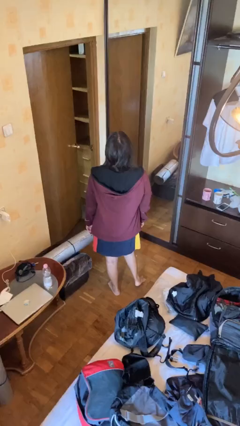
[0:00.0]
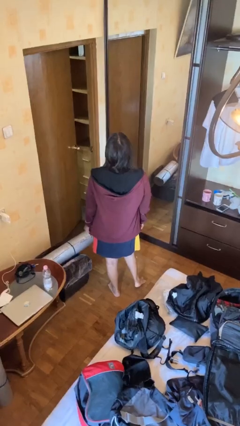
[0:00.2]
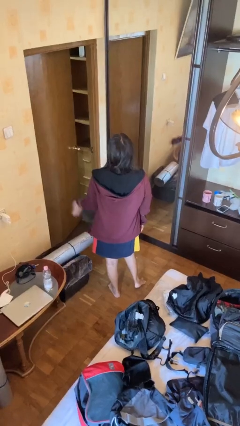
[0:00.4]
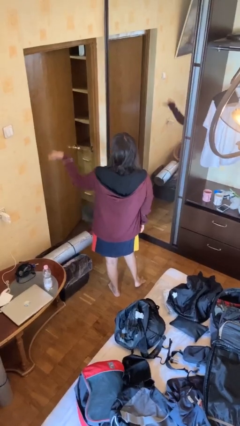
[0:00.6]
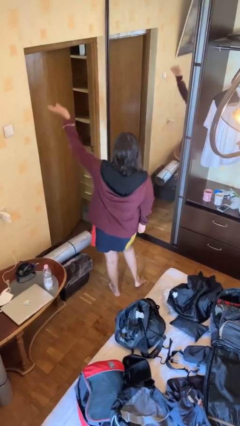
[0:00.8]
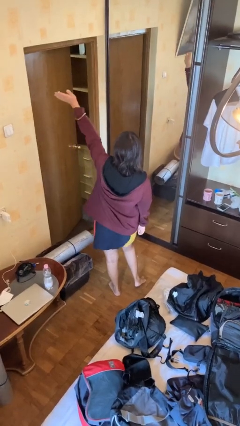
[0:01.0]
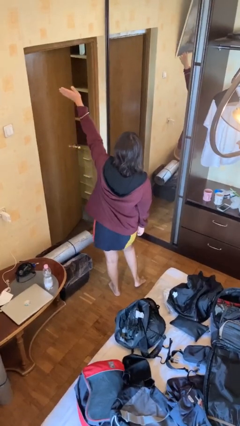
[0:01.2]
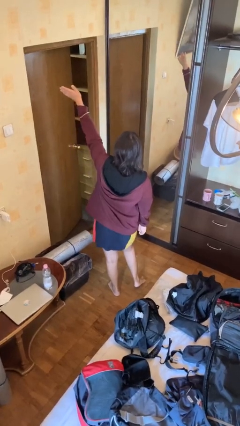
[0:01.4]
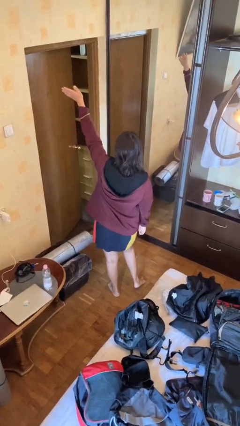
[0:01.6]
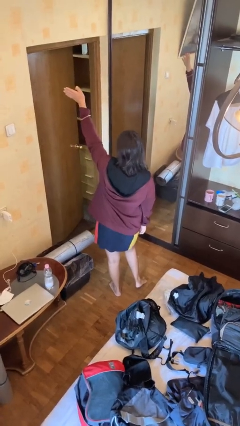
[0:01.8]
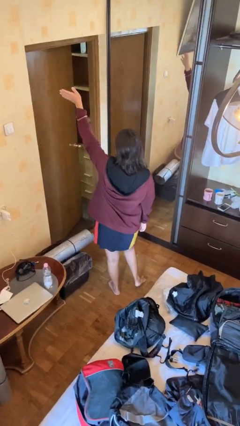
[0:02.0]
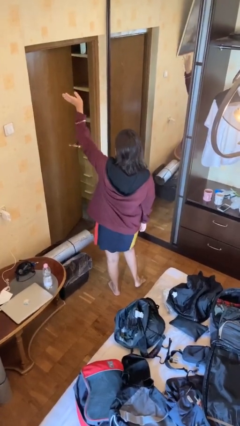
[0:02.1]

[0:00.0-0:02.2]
person gestures swipe up

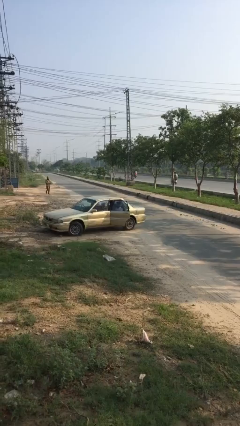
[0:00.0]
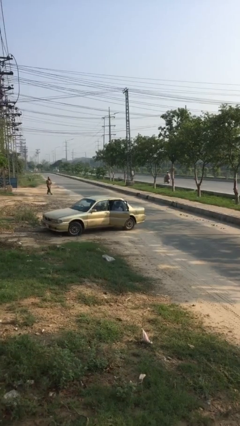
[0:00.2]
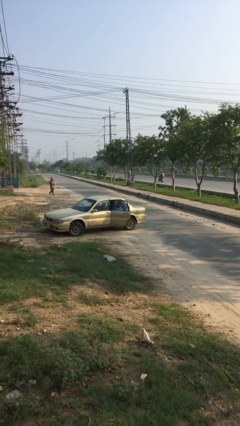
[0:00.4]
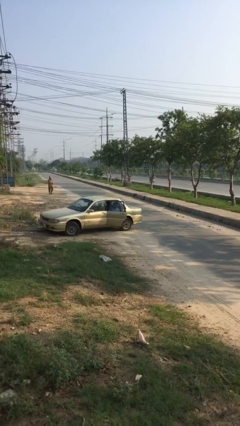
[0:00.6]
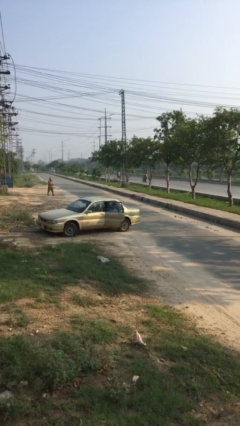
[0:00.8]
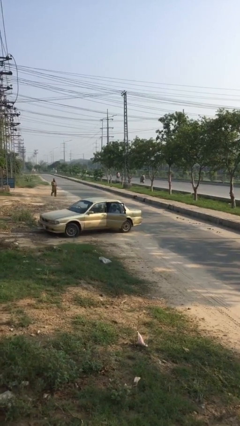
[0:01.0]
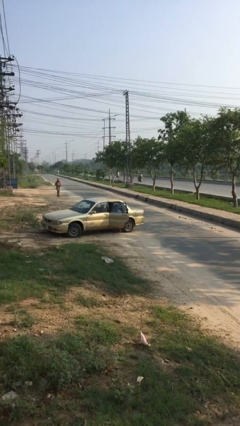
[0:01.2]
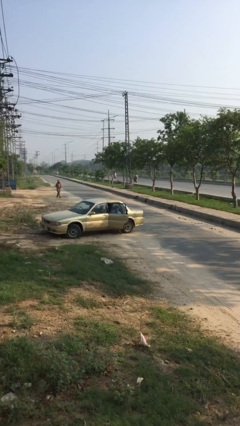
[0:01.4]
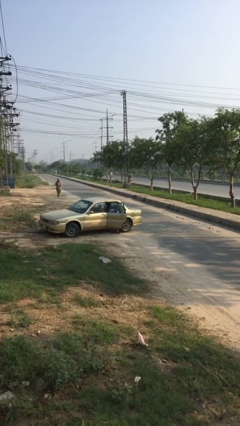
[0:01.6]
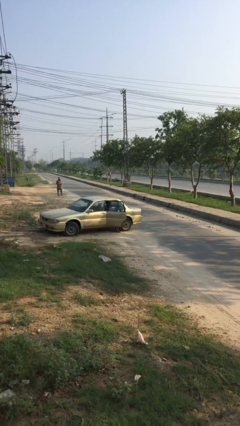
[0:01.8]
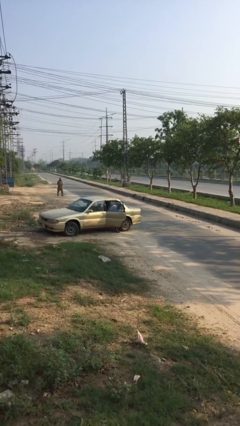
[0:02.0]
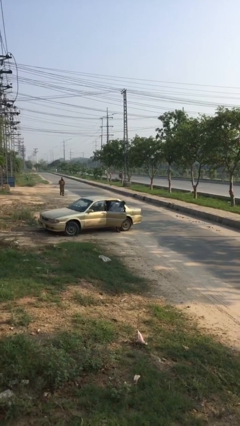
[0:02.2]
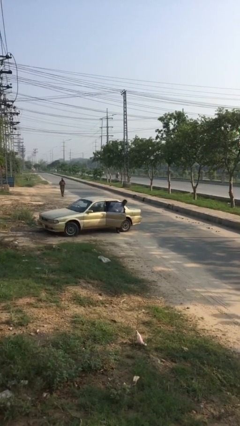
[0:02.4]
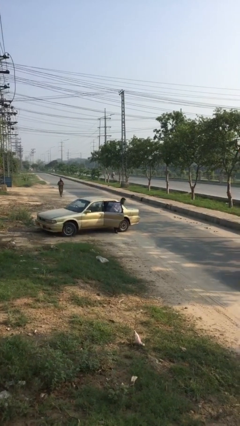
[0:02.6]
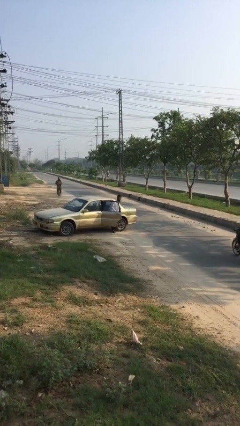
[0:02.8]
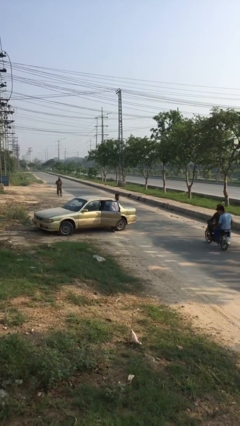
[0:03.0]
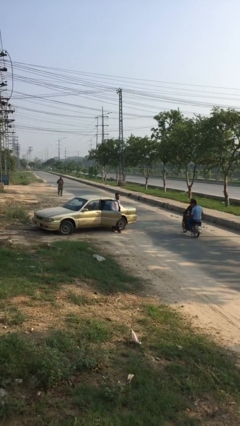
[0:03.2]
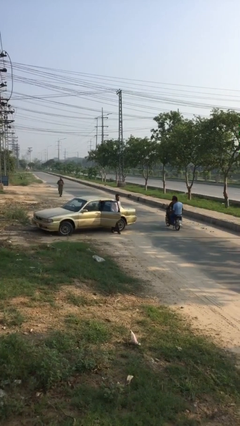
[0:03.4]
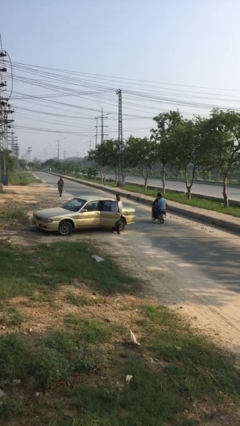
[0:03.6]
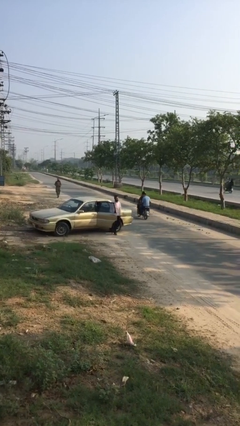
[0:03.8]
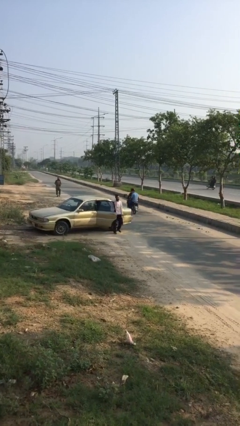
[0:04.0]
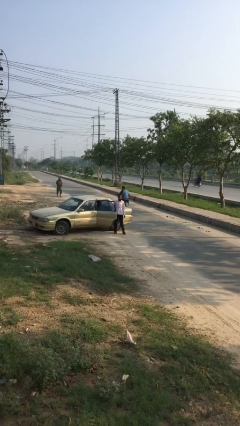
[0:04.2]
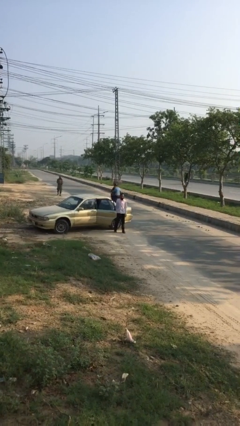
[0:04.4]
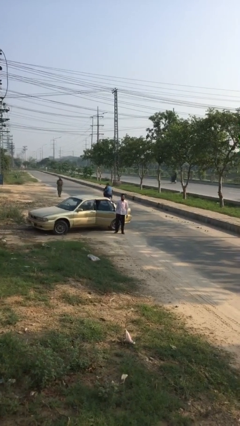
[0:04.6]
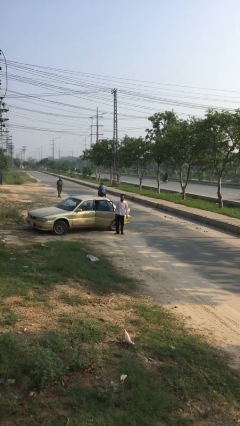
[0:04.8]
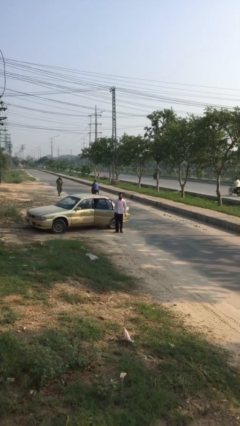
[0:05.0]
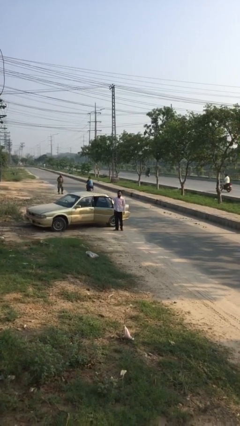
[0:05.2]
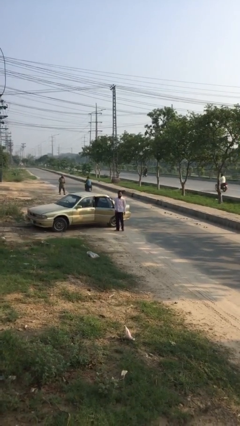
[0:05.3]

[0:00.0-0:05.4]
person exits car

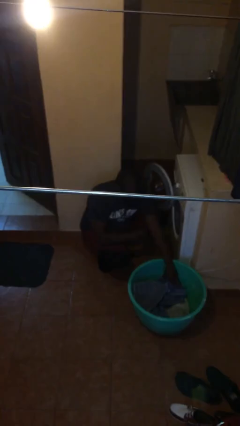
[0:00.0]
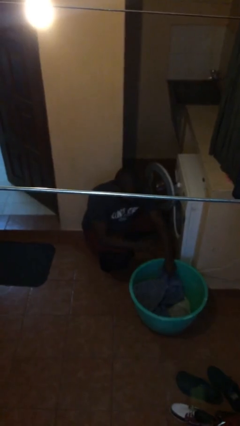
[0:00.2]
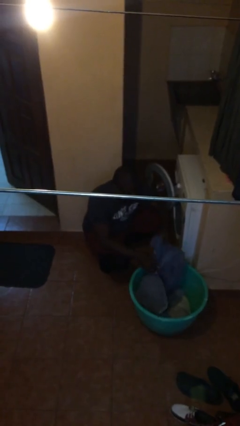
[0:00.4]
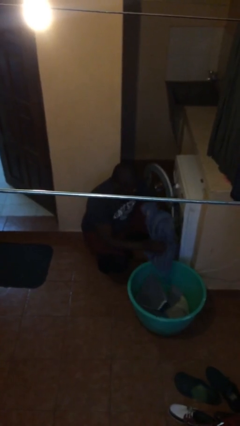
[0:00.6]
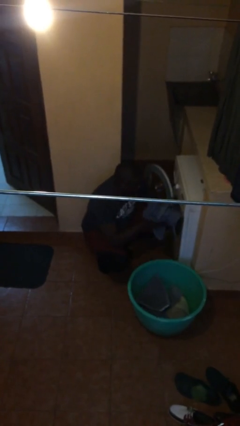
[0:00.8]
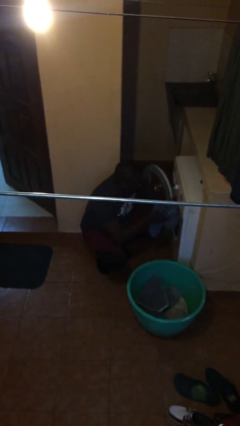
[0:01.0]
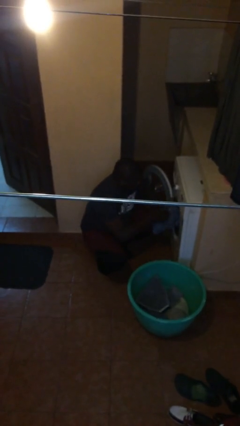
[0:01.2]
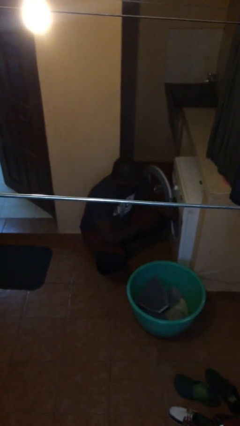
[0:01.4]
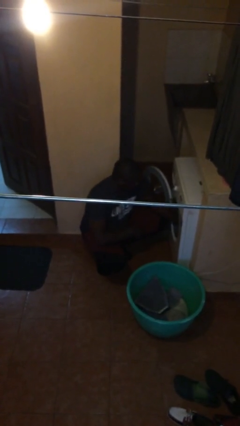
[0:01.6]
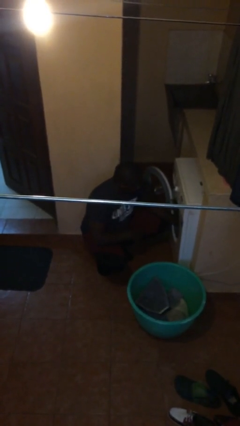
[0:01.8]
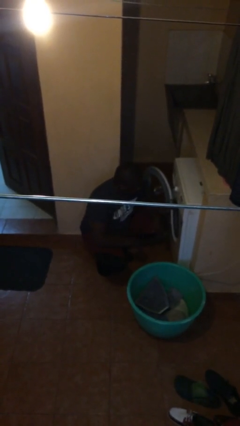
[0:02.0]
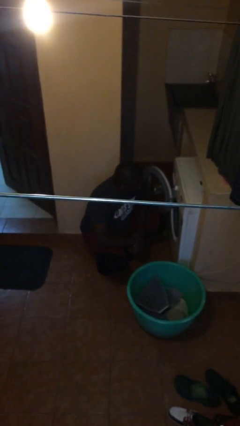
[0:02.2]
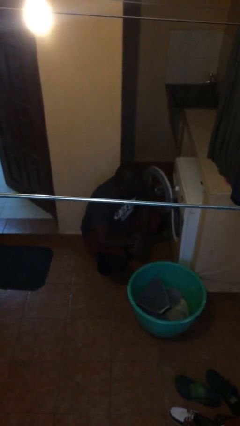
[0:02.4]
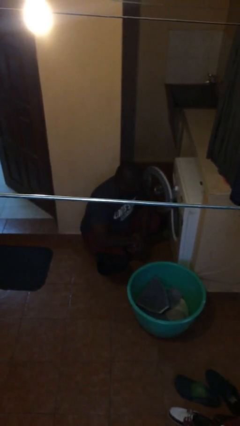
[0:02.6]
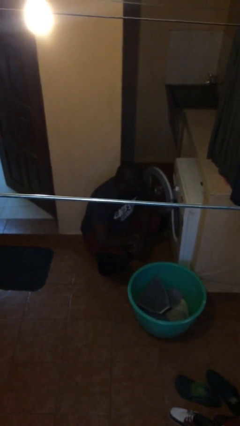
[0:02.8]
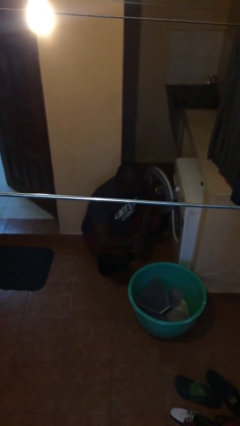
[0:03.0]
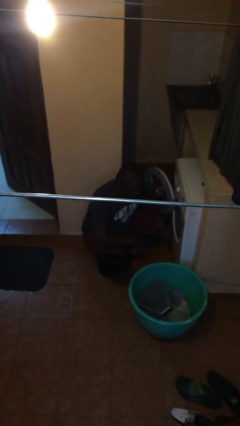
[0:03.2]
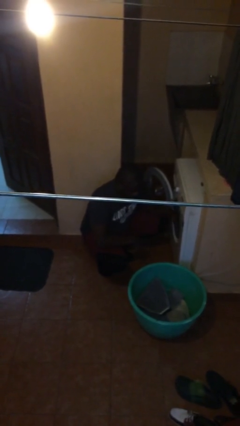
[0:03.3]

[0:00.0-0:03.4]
person loads dryer

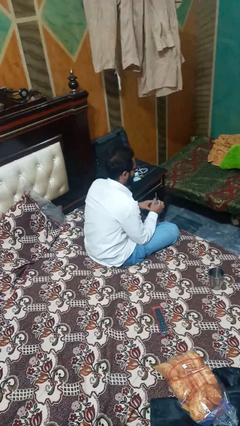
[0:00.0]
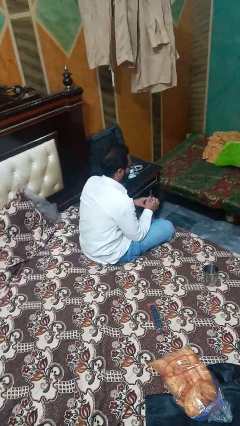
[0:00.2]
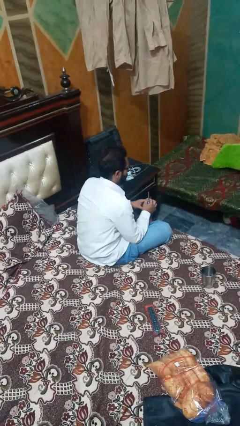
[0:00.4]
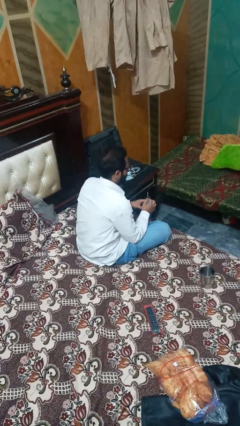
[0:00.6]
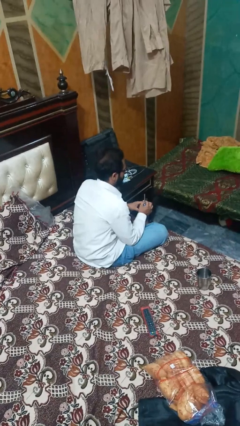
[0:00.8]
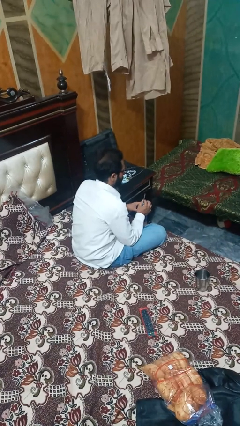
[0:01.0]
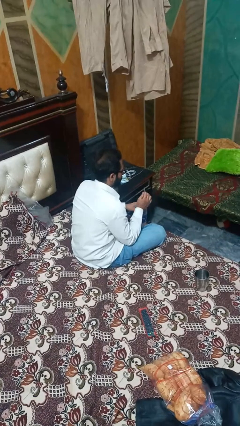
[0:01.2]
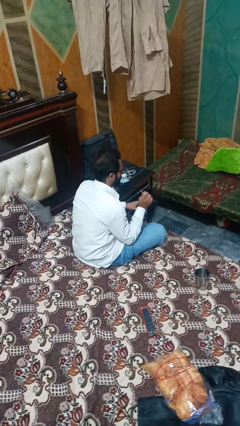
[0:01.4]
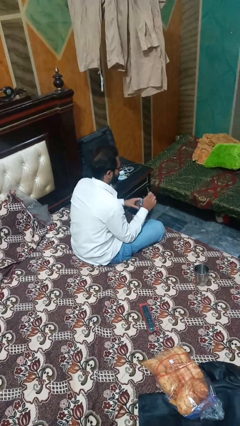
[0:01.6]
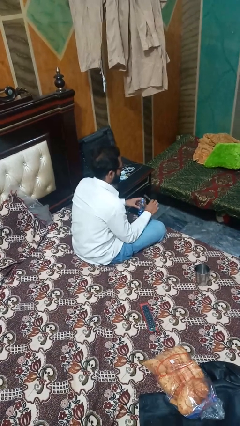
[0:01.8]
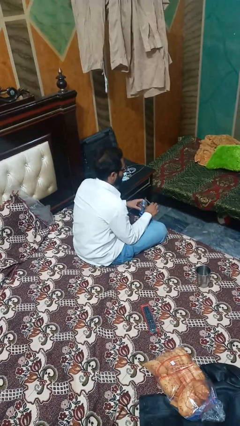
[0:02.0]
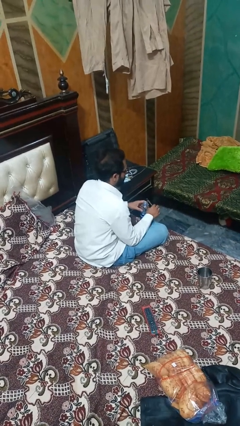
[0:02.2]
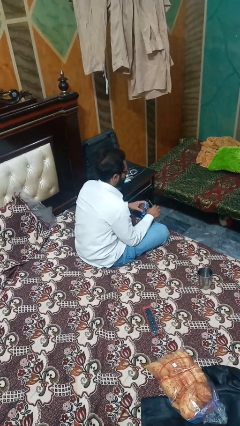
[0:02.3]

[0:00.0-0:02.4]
person pours liquid into cup

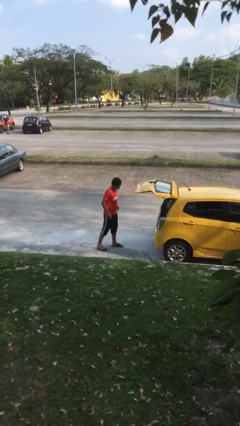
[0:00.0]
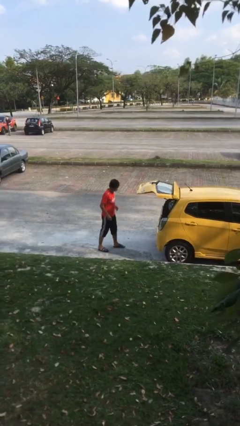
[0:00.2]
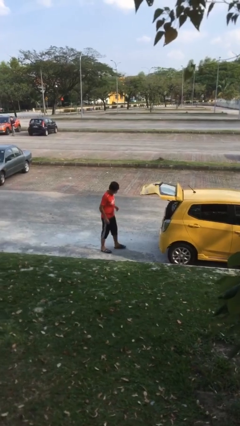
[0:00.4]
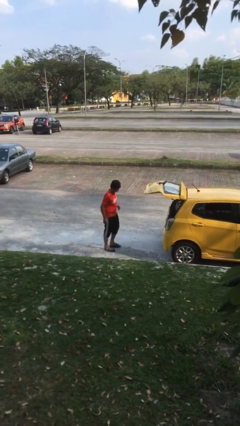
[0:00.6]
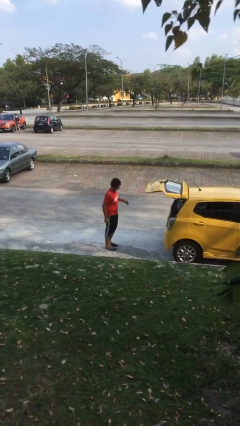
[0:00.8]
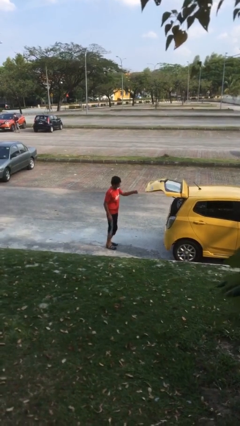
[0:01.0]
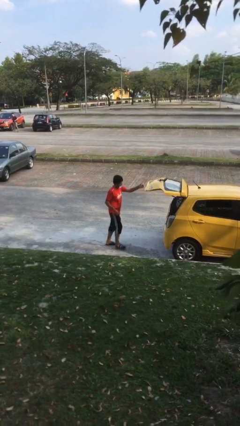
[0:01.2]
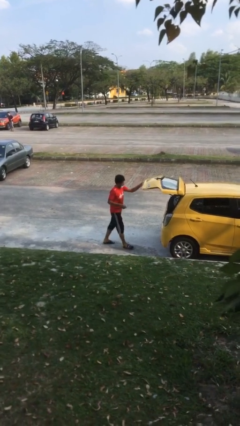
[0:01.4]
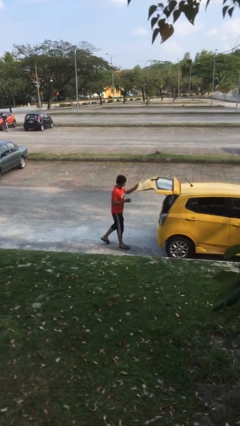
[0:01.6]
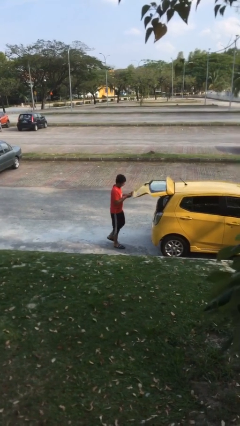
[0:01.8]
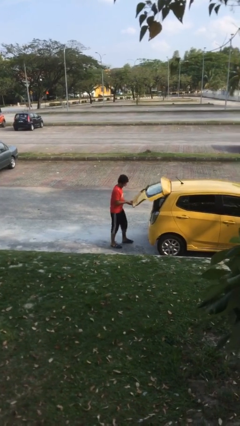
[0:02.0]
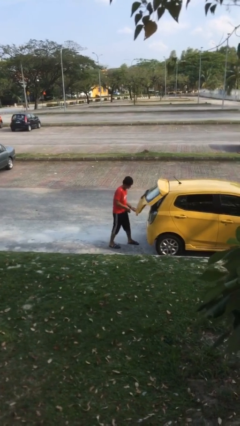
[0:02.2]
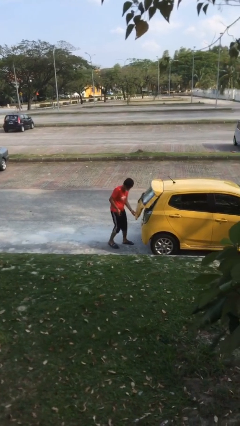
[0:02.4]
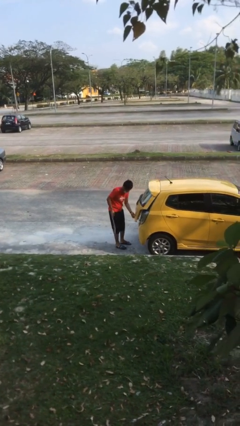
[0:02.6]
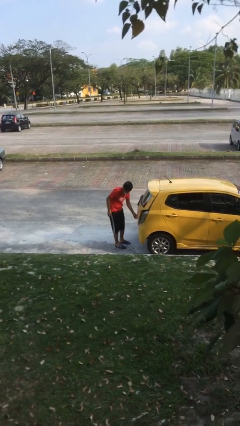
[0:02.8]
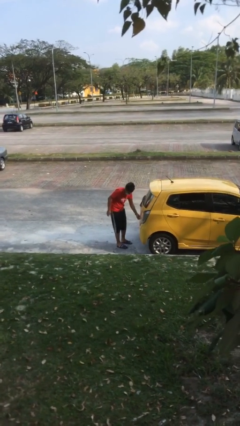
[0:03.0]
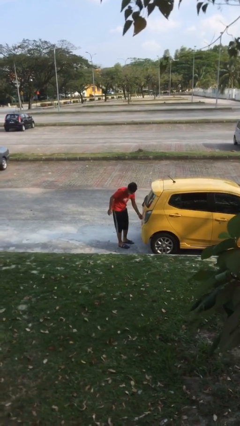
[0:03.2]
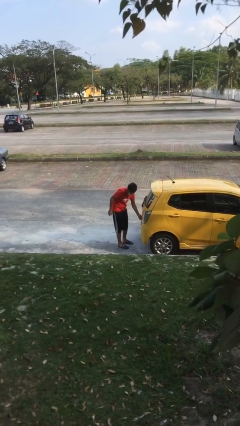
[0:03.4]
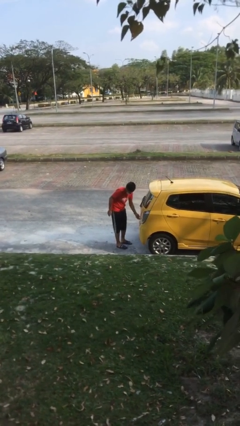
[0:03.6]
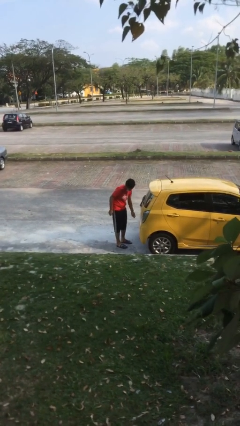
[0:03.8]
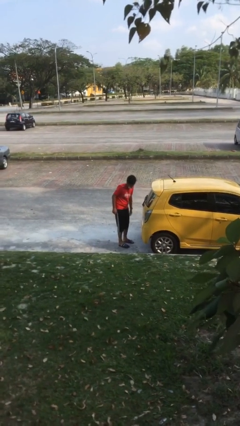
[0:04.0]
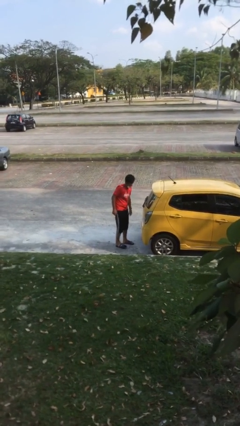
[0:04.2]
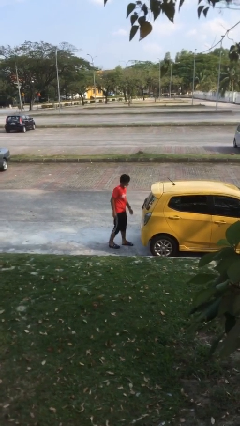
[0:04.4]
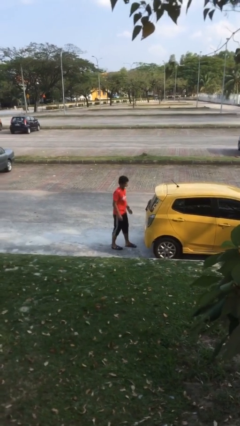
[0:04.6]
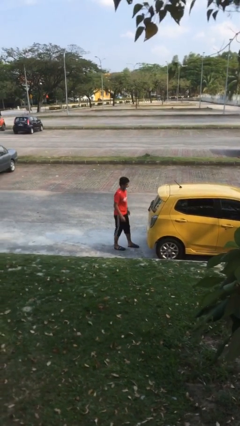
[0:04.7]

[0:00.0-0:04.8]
person closes car trunk
